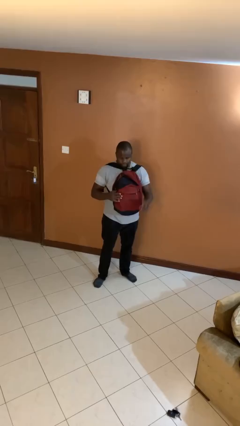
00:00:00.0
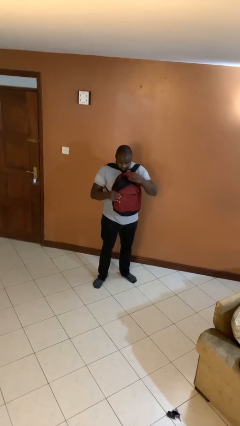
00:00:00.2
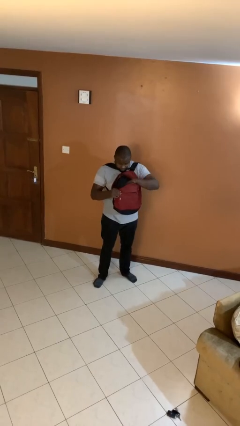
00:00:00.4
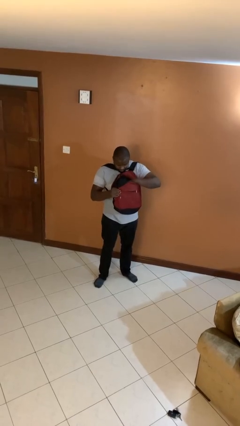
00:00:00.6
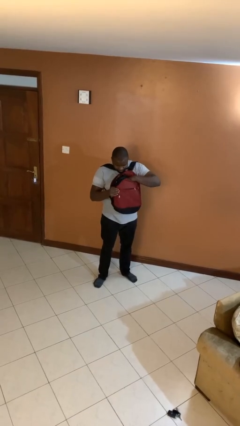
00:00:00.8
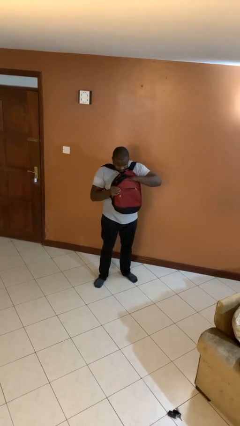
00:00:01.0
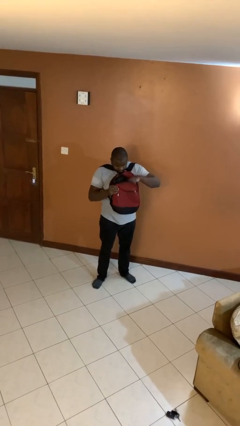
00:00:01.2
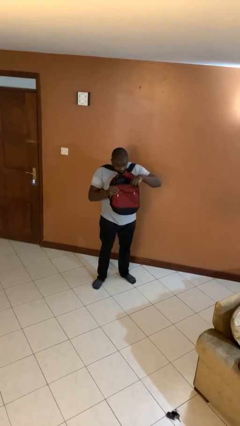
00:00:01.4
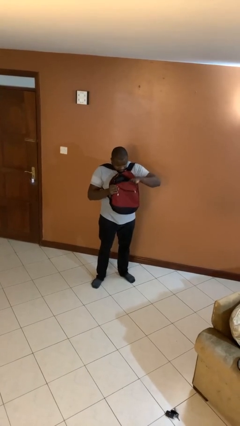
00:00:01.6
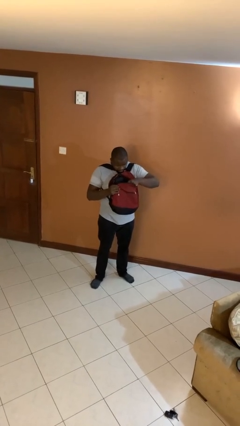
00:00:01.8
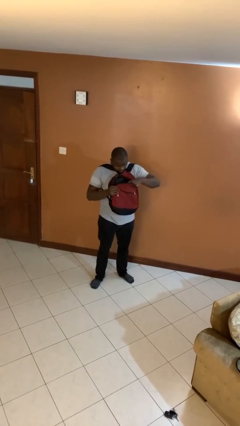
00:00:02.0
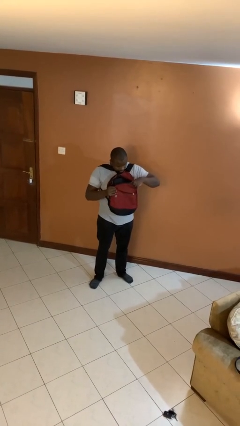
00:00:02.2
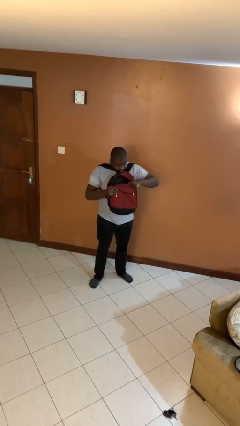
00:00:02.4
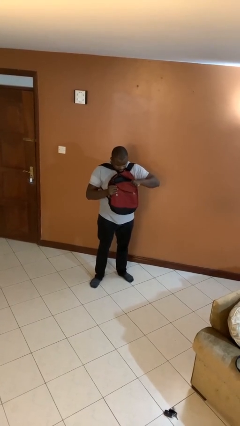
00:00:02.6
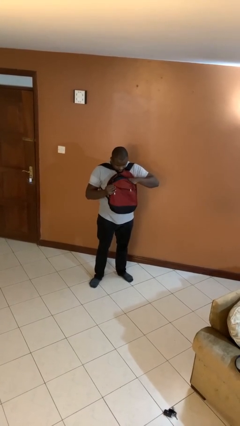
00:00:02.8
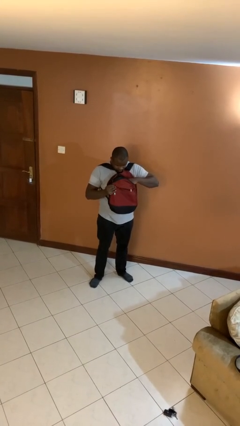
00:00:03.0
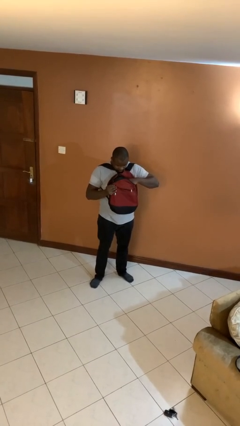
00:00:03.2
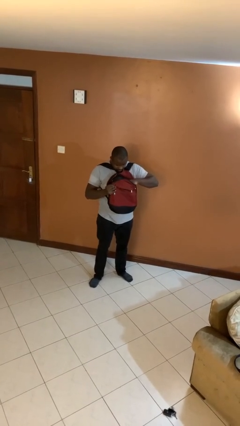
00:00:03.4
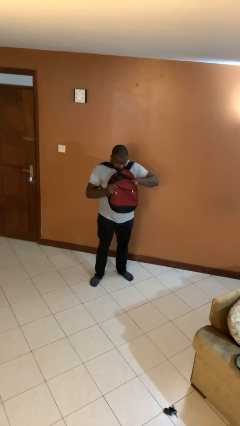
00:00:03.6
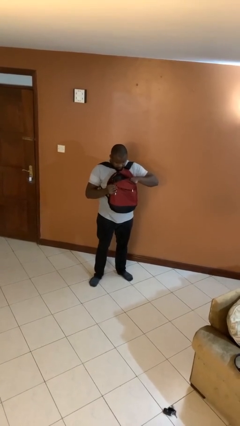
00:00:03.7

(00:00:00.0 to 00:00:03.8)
person searches in backpack

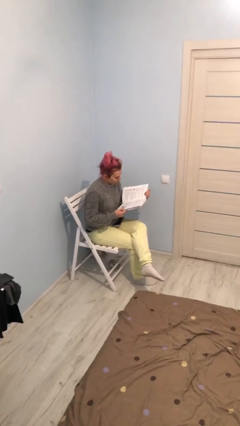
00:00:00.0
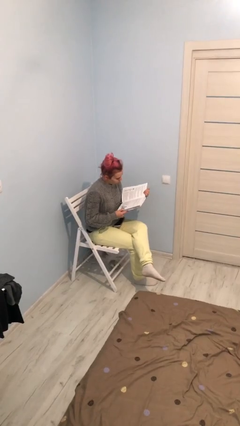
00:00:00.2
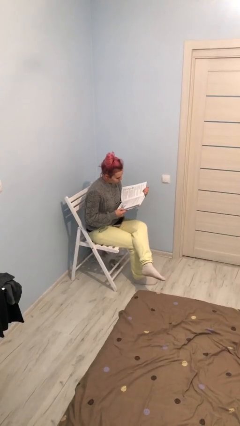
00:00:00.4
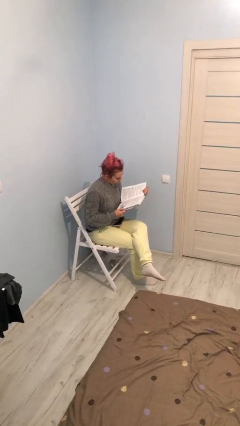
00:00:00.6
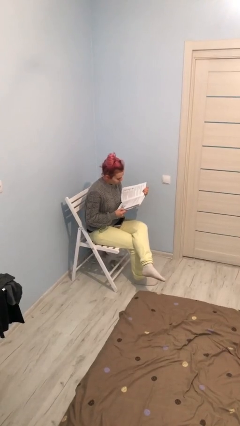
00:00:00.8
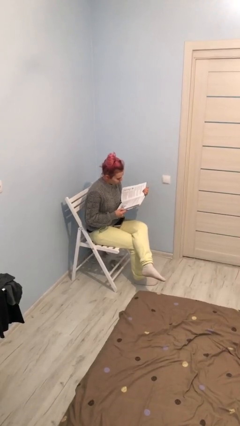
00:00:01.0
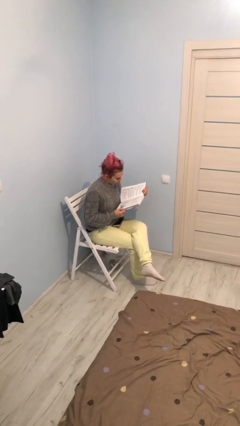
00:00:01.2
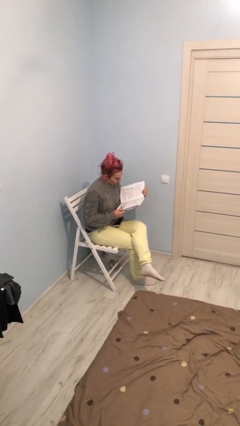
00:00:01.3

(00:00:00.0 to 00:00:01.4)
person reads document

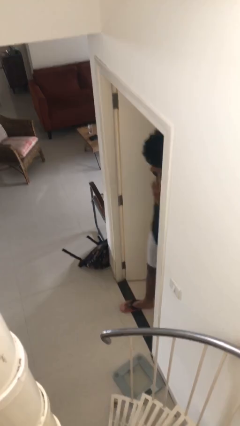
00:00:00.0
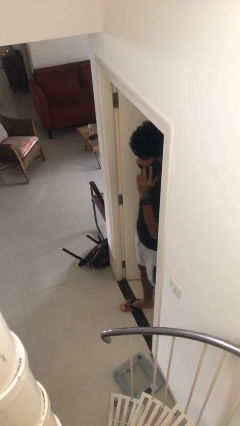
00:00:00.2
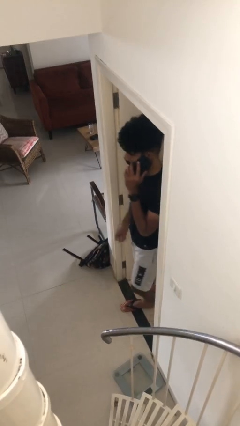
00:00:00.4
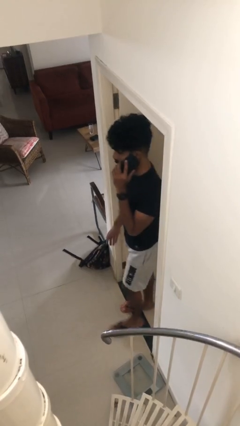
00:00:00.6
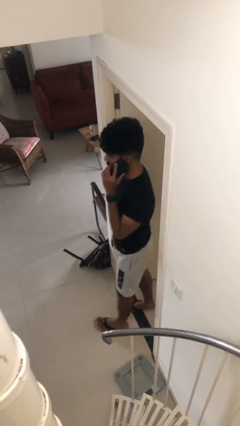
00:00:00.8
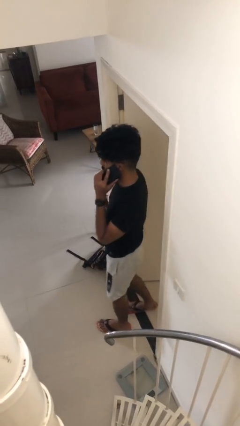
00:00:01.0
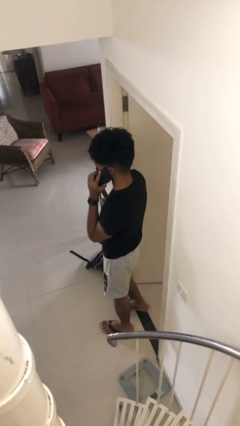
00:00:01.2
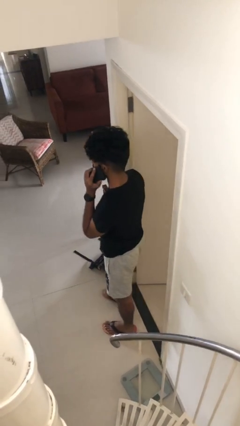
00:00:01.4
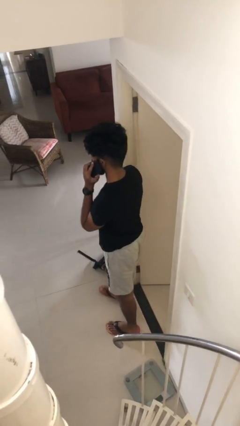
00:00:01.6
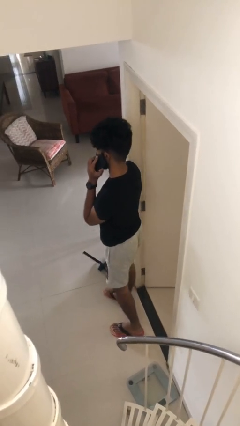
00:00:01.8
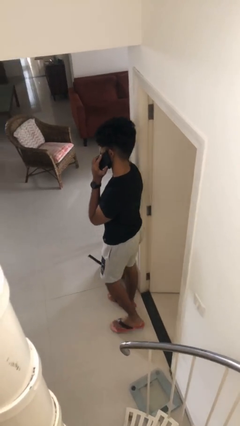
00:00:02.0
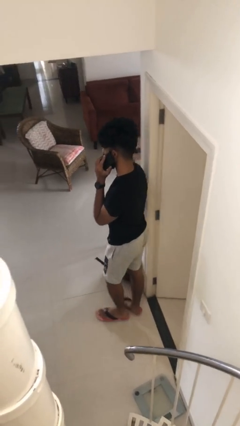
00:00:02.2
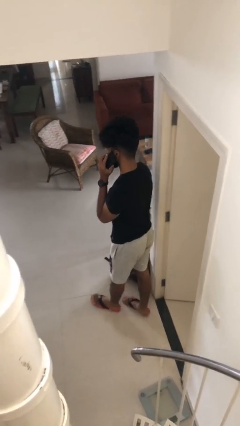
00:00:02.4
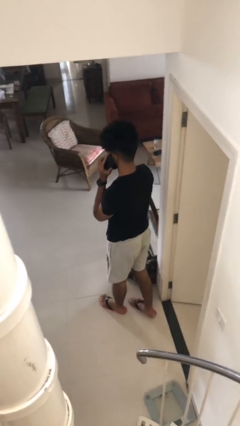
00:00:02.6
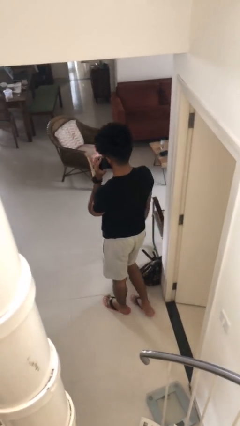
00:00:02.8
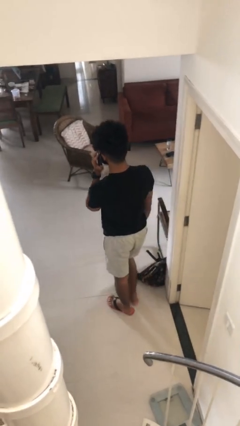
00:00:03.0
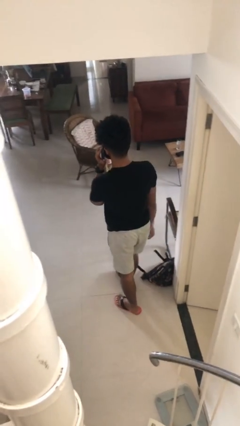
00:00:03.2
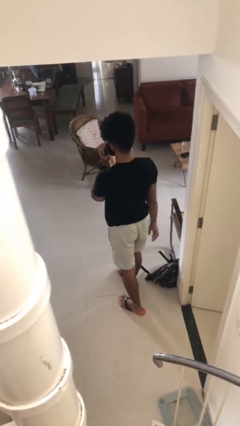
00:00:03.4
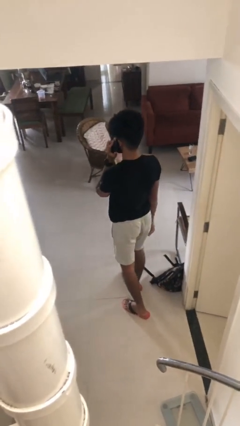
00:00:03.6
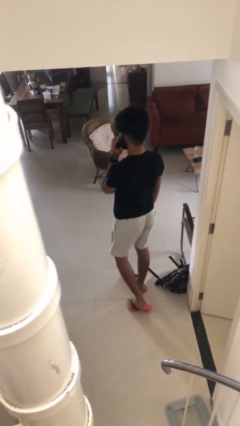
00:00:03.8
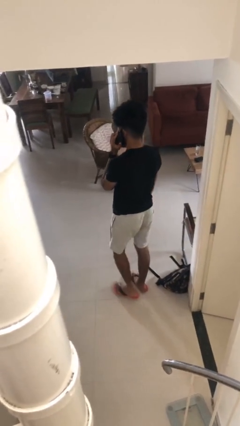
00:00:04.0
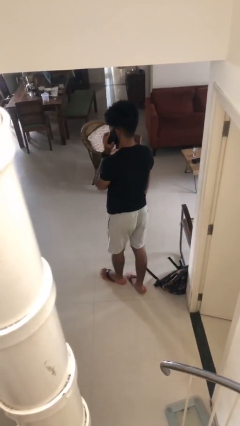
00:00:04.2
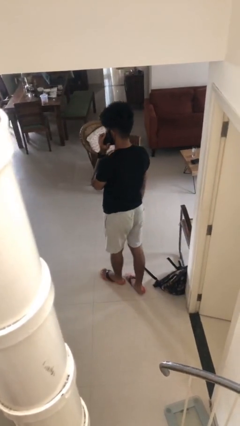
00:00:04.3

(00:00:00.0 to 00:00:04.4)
person enters scene through structure

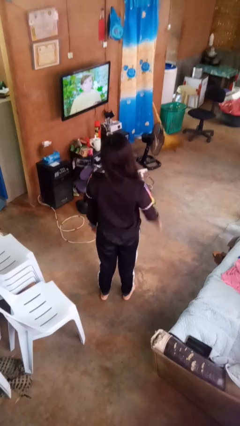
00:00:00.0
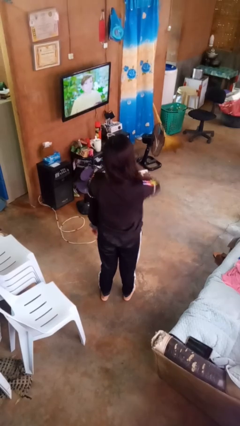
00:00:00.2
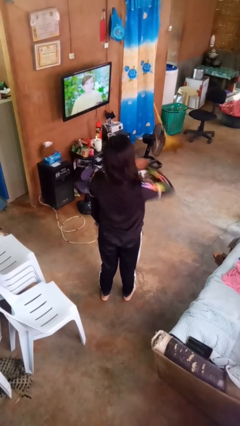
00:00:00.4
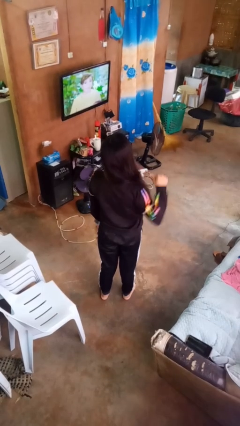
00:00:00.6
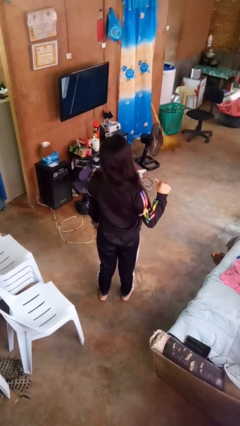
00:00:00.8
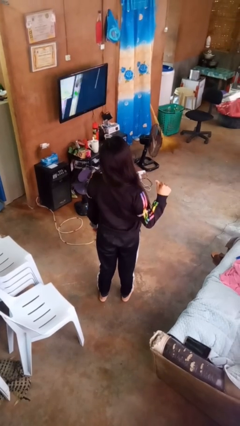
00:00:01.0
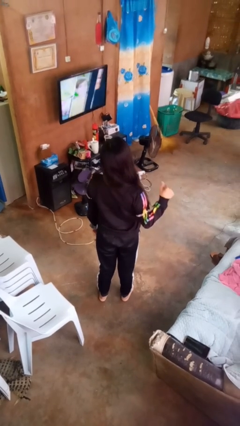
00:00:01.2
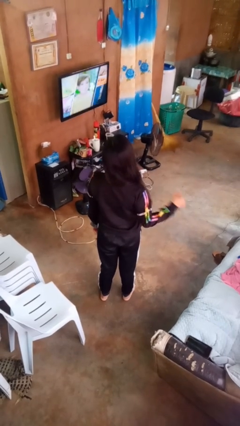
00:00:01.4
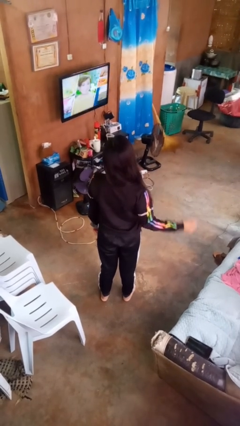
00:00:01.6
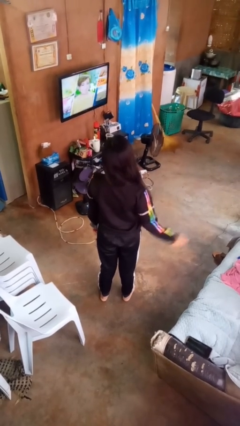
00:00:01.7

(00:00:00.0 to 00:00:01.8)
person gestures cut

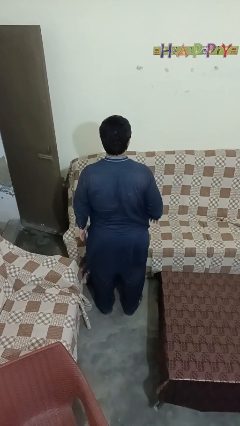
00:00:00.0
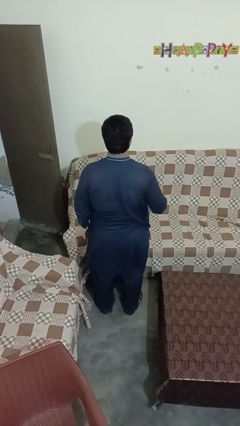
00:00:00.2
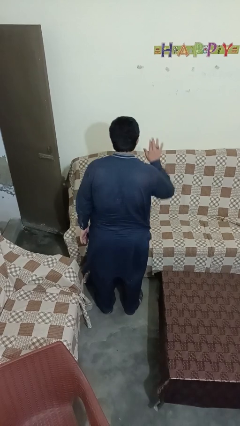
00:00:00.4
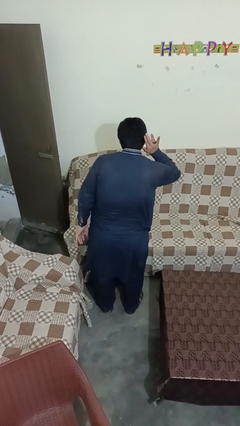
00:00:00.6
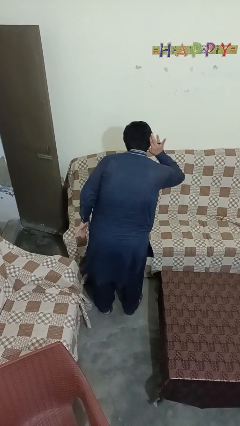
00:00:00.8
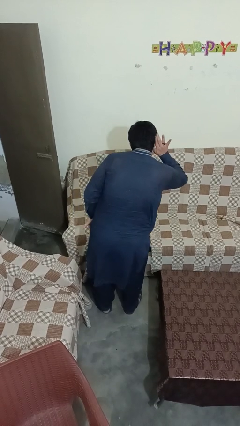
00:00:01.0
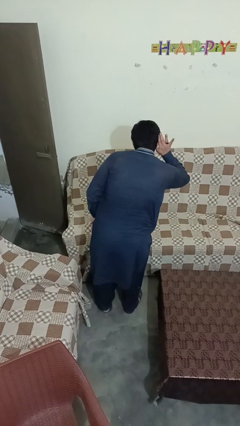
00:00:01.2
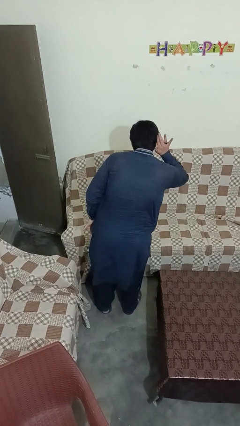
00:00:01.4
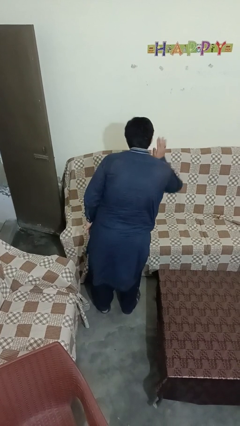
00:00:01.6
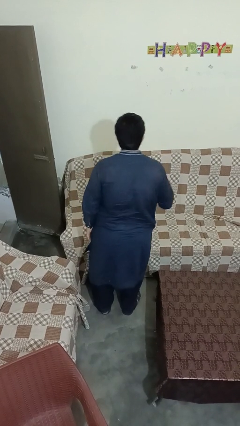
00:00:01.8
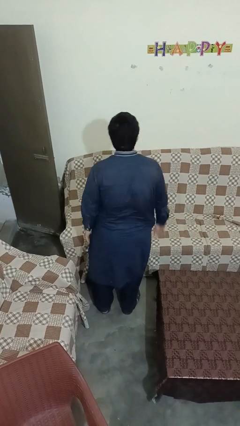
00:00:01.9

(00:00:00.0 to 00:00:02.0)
person gestures listen closely

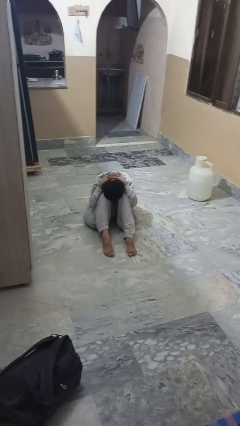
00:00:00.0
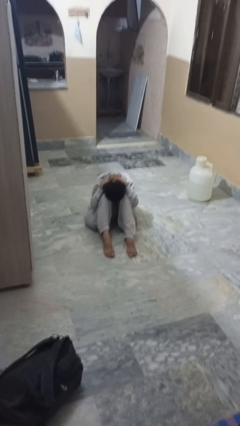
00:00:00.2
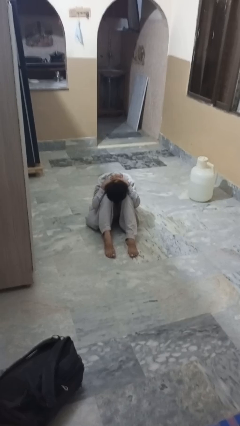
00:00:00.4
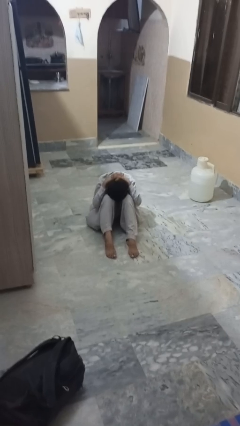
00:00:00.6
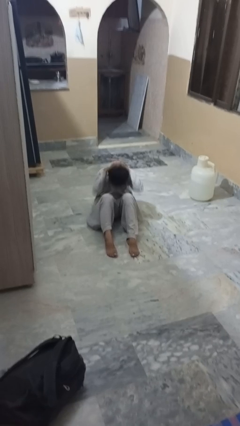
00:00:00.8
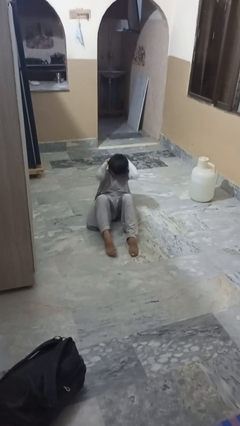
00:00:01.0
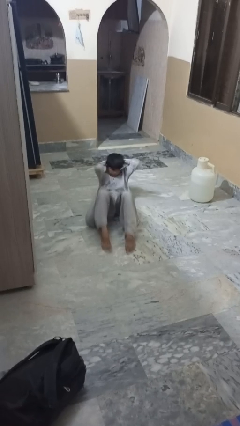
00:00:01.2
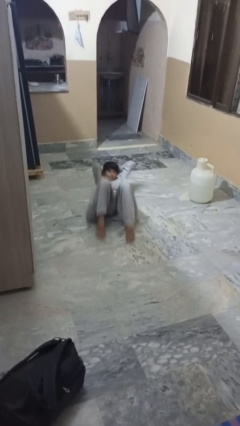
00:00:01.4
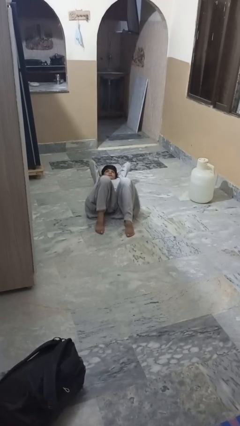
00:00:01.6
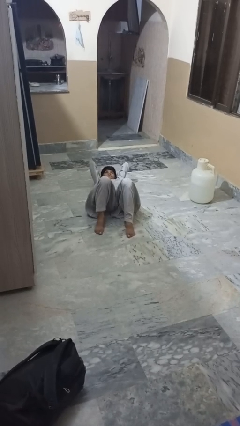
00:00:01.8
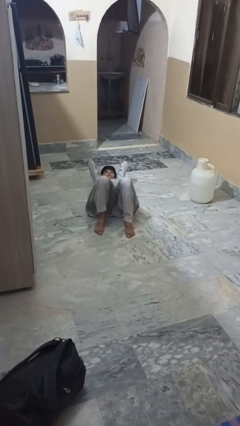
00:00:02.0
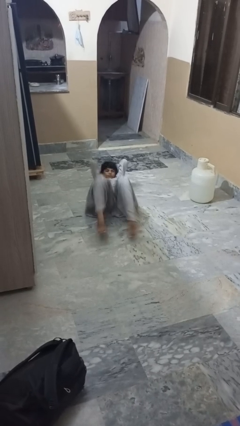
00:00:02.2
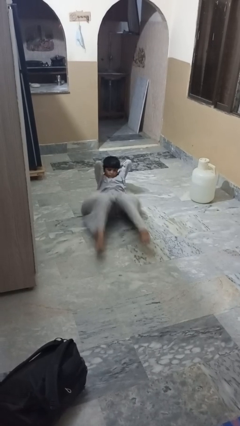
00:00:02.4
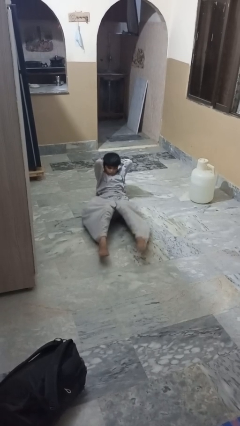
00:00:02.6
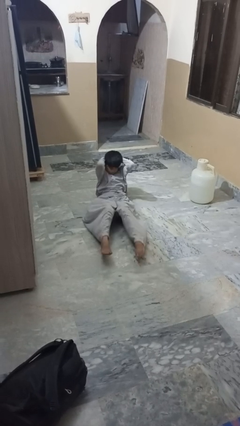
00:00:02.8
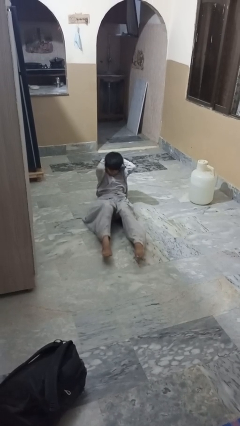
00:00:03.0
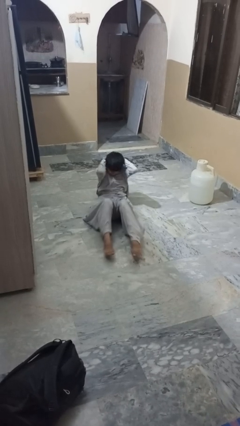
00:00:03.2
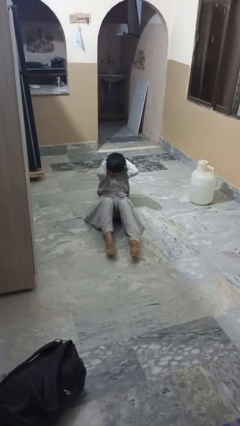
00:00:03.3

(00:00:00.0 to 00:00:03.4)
person exercises with situp

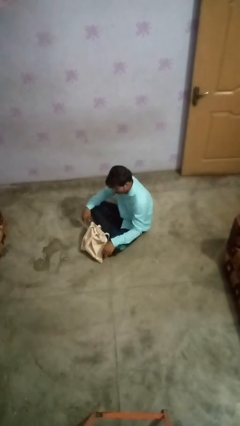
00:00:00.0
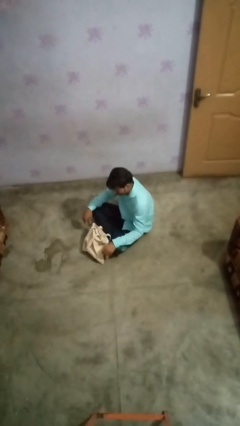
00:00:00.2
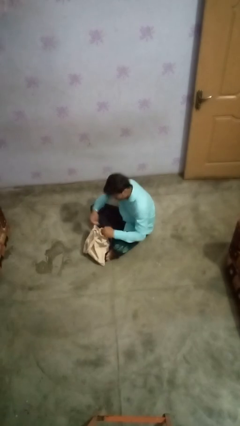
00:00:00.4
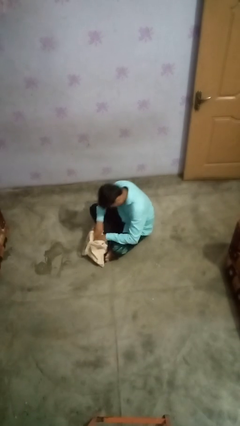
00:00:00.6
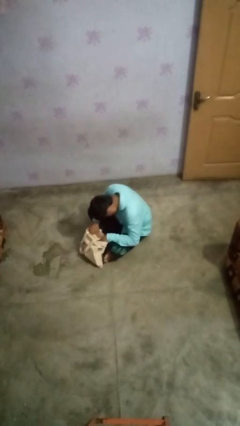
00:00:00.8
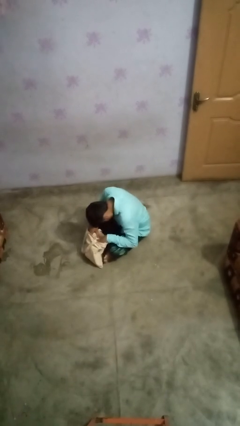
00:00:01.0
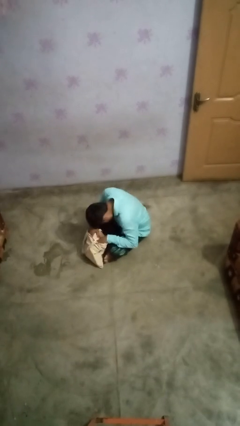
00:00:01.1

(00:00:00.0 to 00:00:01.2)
person searches in bag
